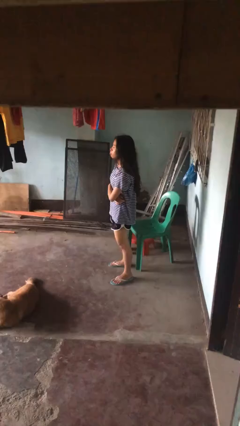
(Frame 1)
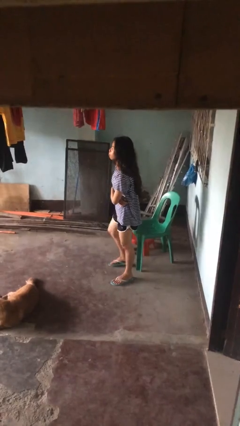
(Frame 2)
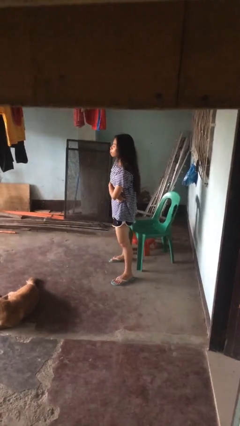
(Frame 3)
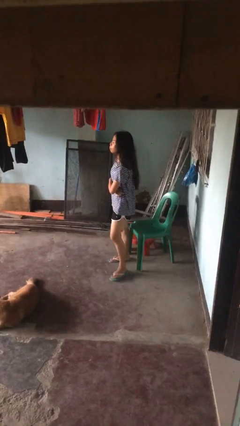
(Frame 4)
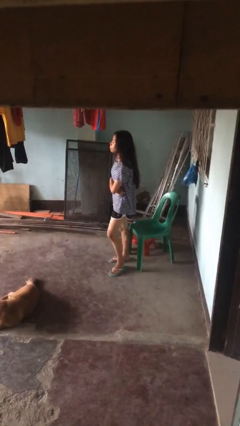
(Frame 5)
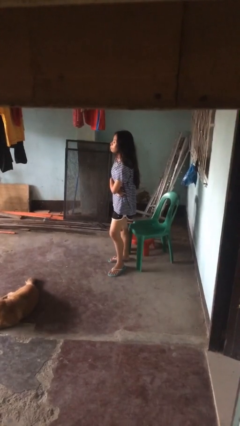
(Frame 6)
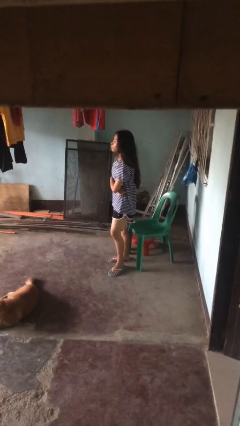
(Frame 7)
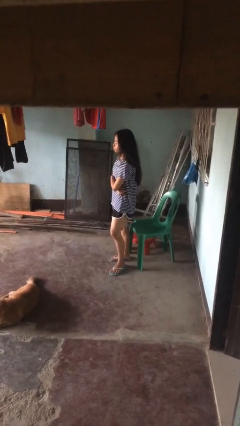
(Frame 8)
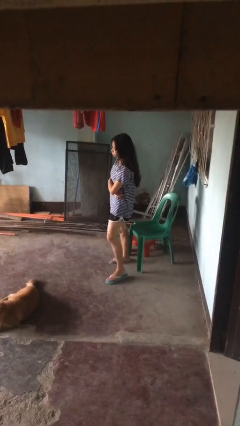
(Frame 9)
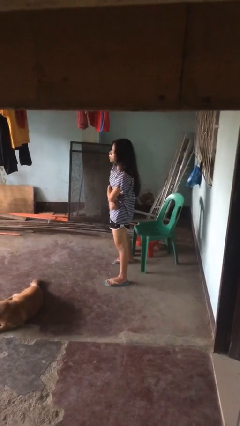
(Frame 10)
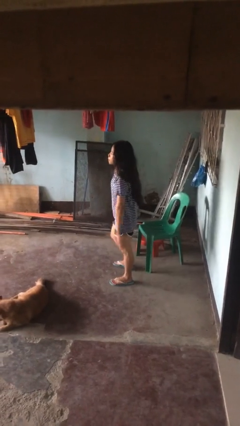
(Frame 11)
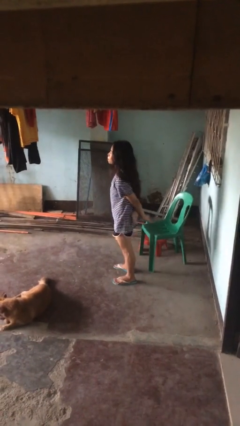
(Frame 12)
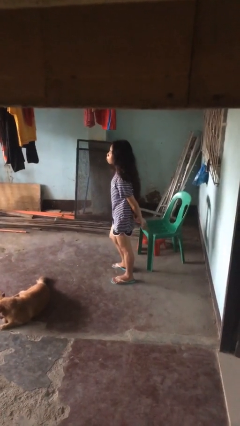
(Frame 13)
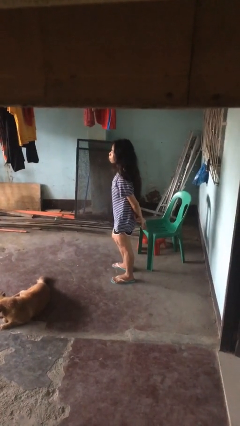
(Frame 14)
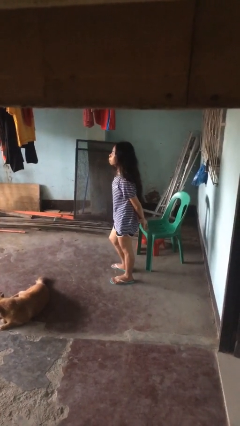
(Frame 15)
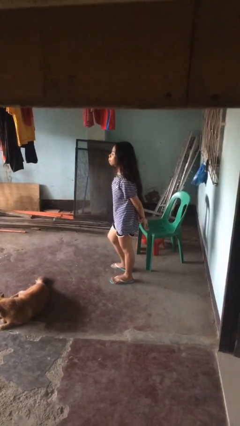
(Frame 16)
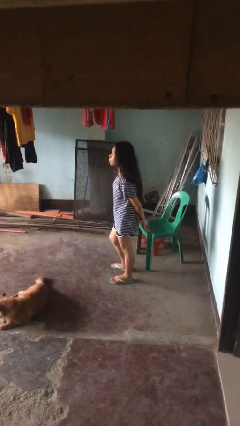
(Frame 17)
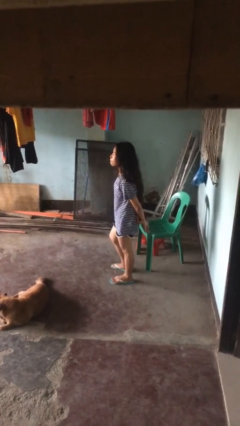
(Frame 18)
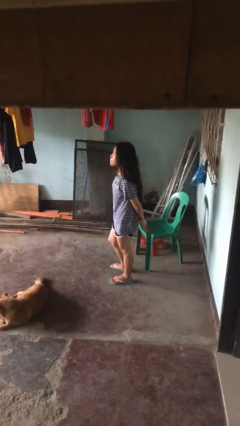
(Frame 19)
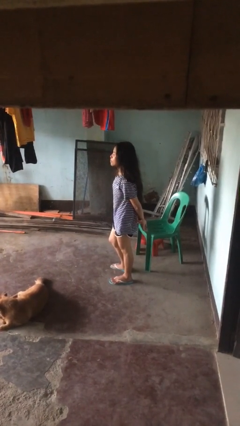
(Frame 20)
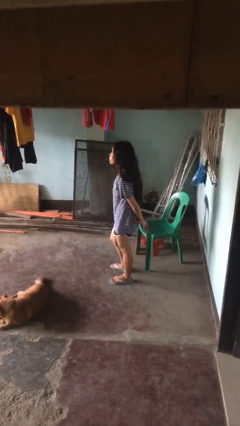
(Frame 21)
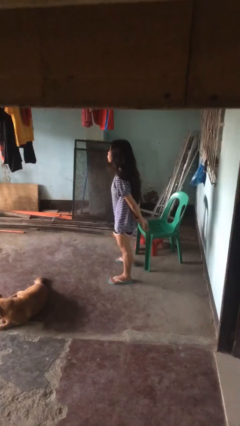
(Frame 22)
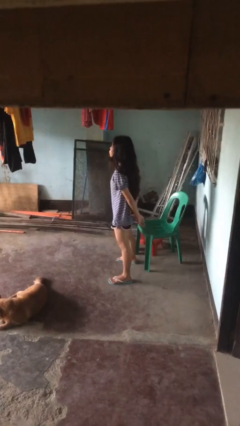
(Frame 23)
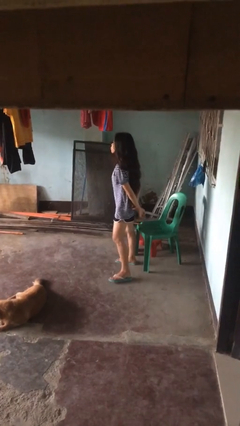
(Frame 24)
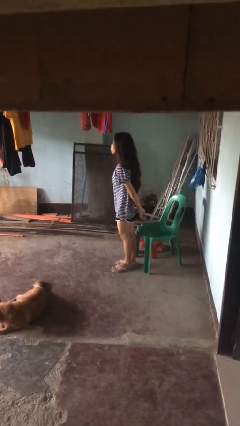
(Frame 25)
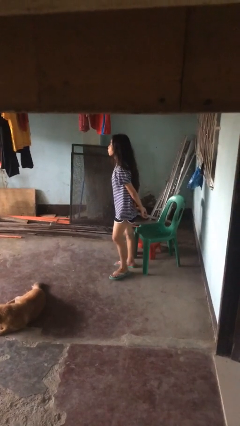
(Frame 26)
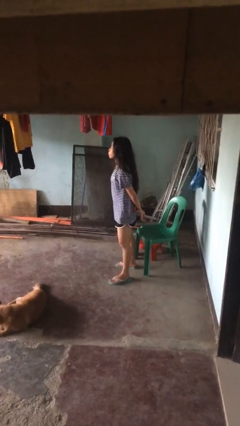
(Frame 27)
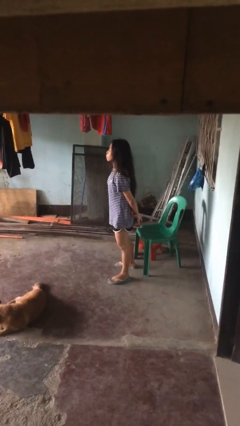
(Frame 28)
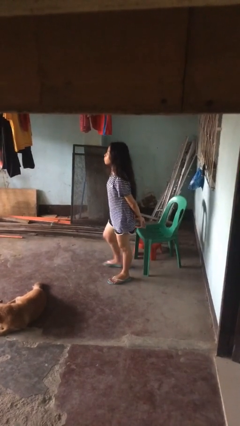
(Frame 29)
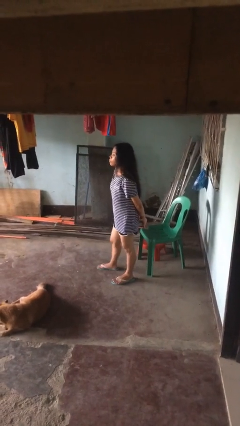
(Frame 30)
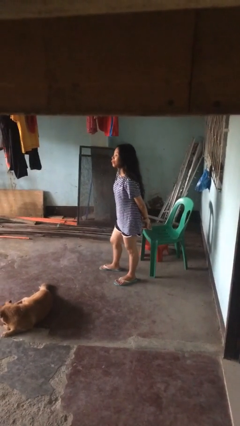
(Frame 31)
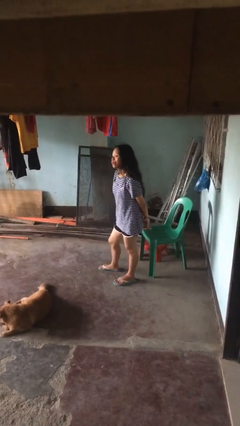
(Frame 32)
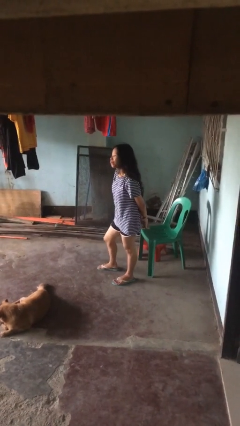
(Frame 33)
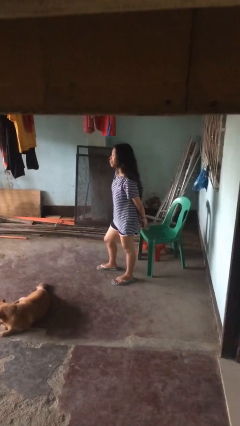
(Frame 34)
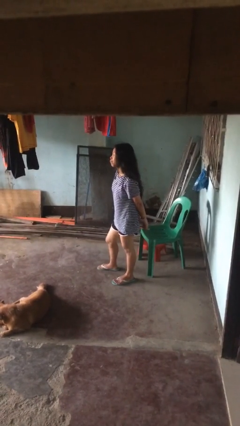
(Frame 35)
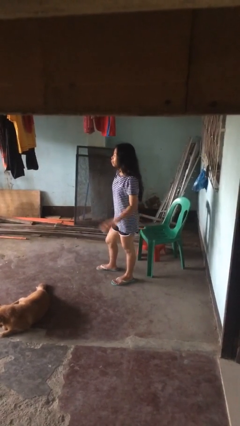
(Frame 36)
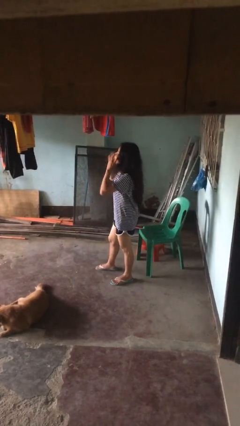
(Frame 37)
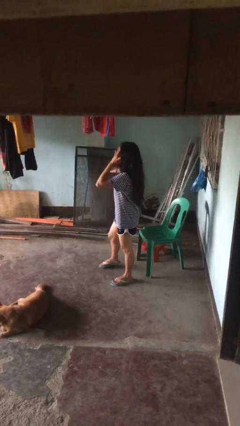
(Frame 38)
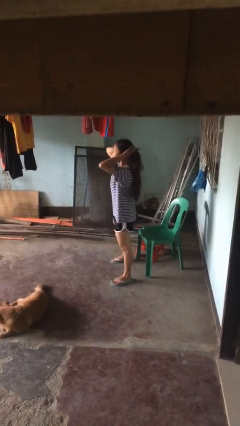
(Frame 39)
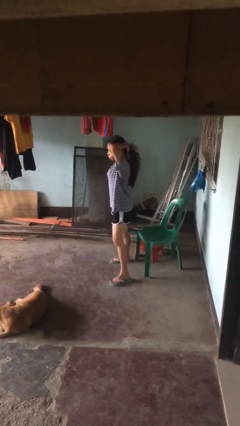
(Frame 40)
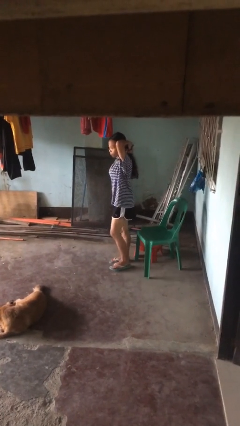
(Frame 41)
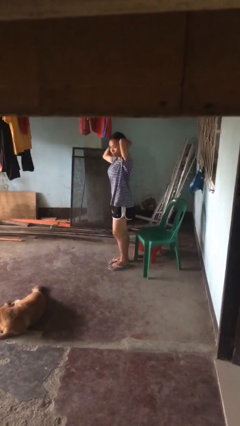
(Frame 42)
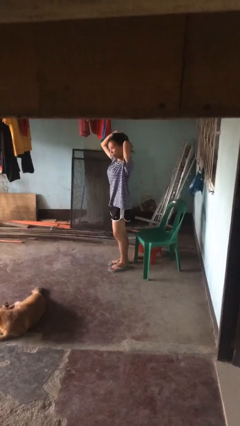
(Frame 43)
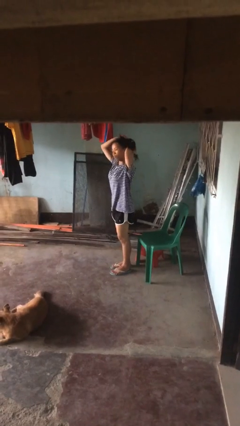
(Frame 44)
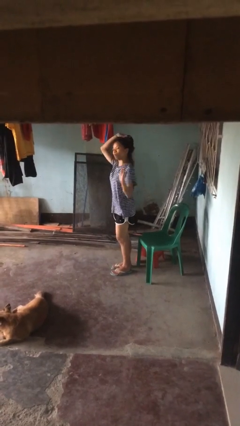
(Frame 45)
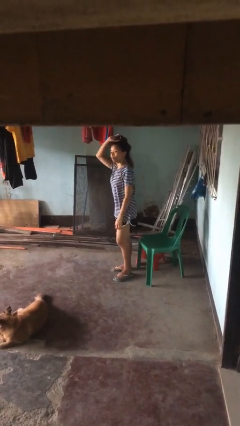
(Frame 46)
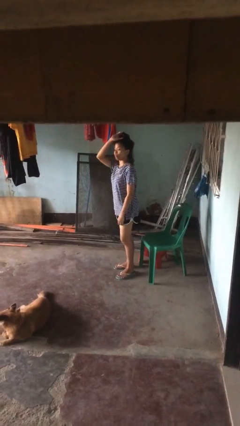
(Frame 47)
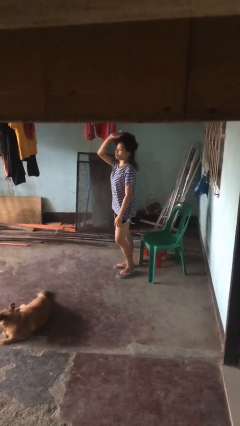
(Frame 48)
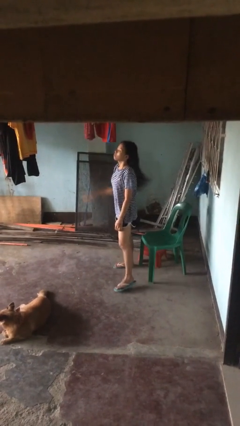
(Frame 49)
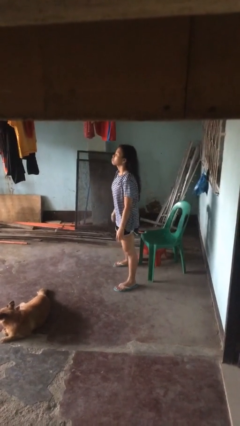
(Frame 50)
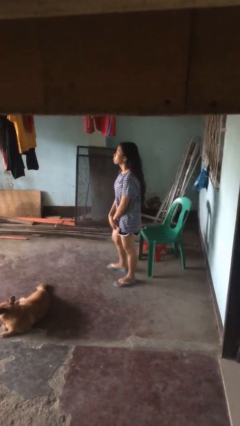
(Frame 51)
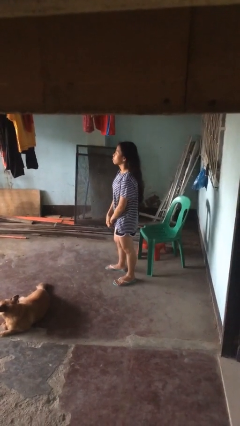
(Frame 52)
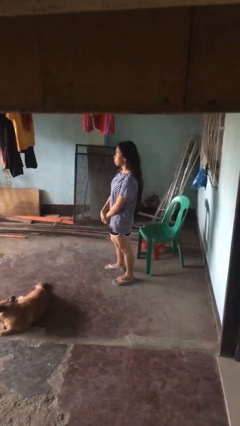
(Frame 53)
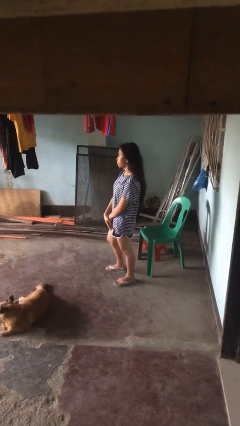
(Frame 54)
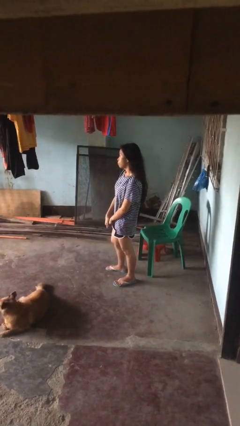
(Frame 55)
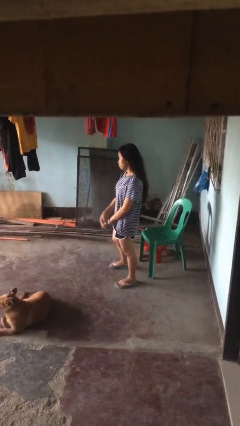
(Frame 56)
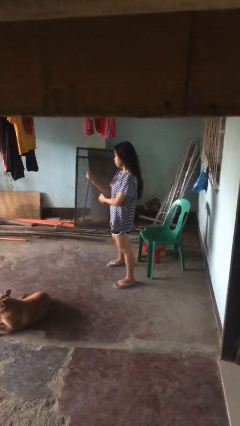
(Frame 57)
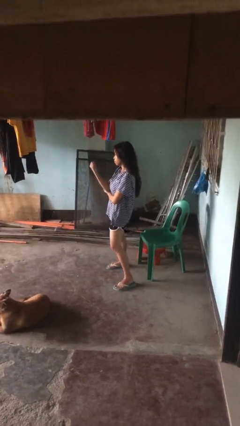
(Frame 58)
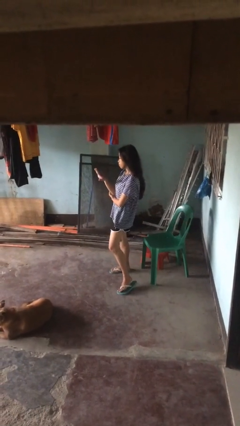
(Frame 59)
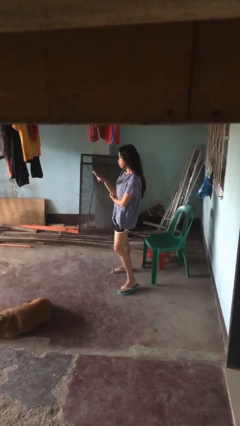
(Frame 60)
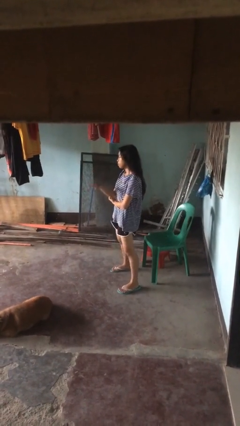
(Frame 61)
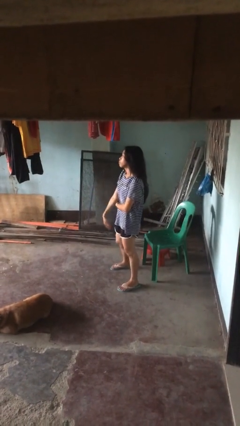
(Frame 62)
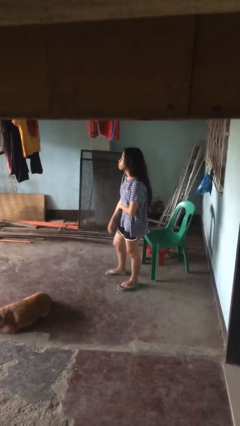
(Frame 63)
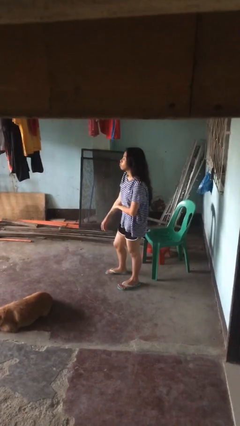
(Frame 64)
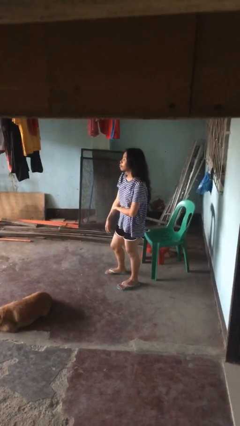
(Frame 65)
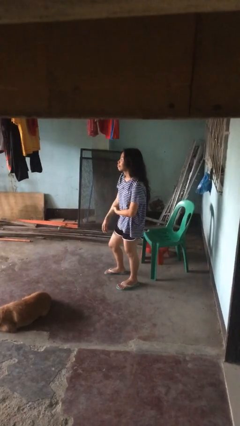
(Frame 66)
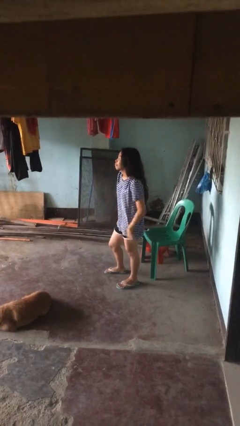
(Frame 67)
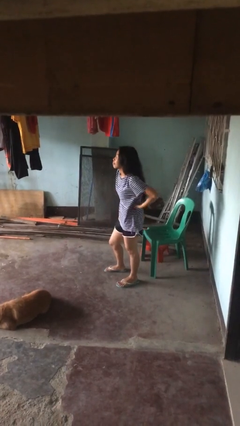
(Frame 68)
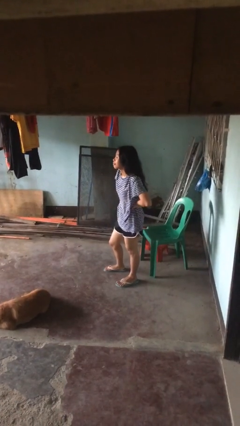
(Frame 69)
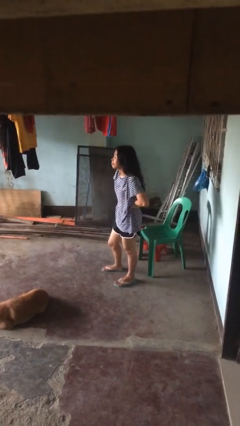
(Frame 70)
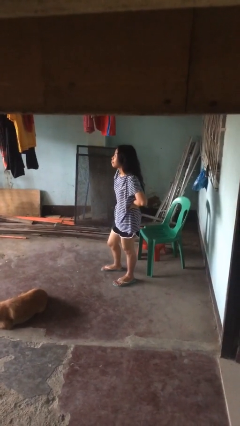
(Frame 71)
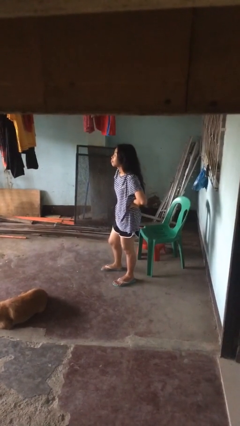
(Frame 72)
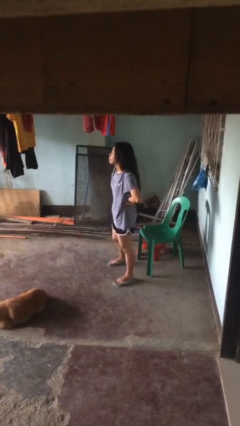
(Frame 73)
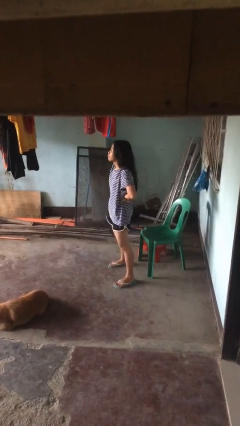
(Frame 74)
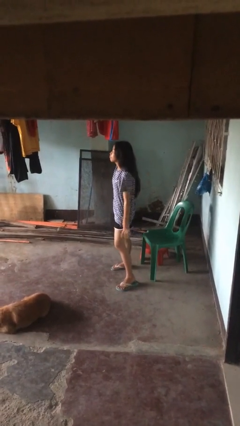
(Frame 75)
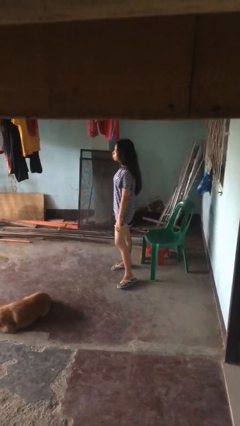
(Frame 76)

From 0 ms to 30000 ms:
person walks

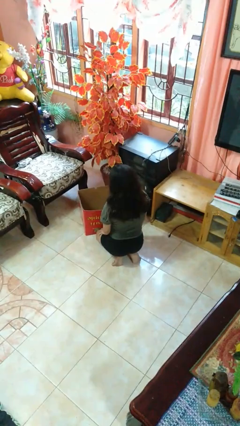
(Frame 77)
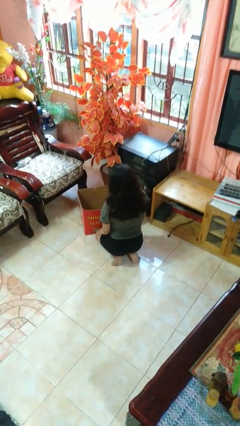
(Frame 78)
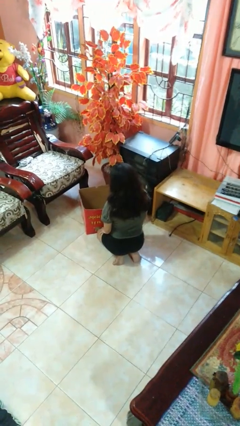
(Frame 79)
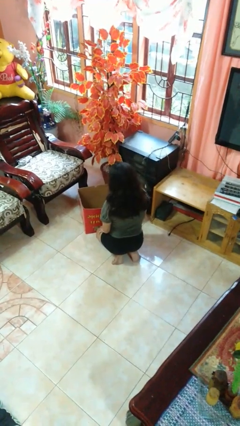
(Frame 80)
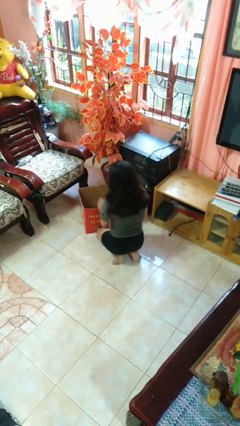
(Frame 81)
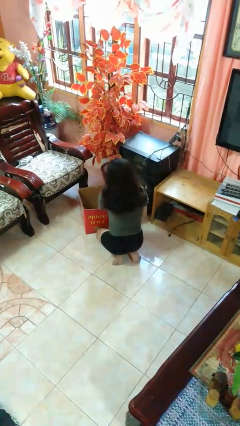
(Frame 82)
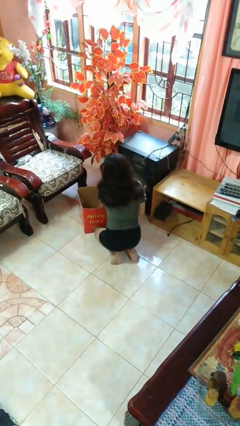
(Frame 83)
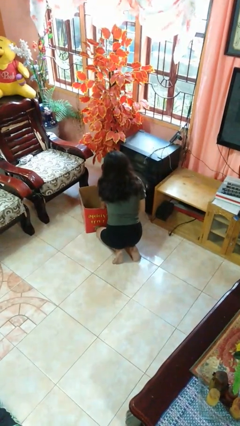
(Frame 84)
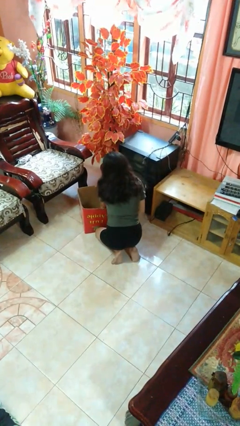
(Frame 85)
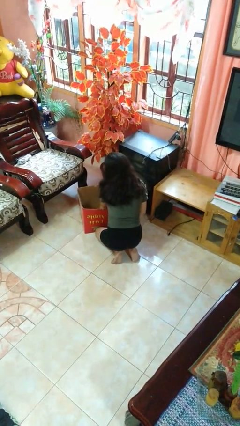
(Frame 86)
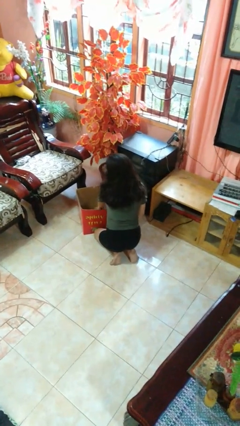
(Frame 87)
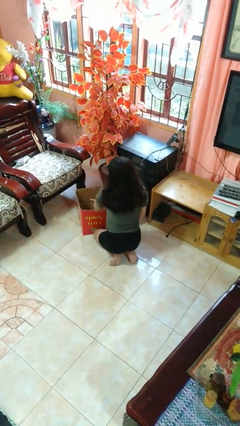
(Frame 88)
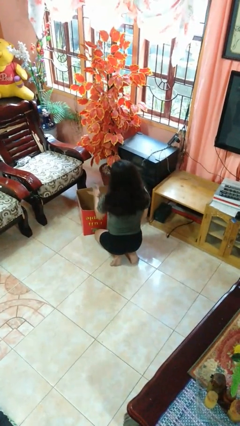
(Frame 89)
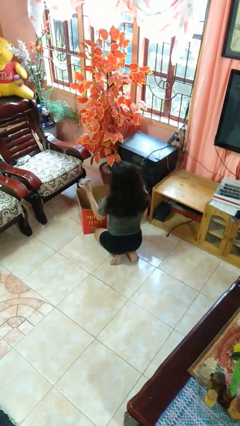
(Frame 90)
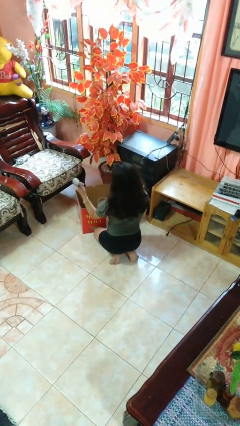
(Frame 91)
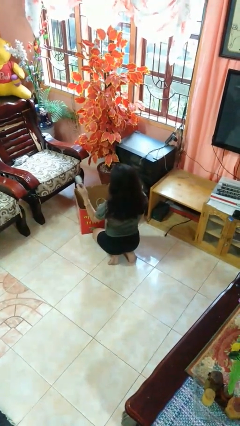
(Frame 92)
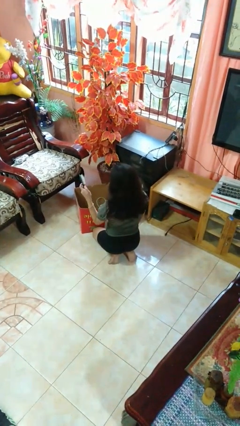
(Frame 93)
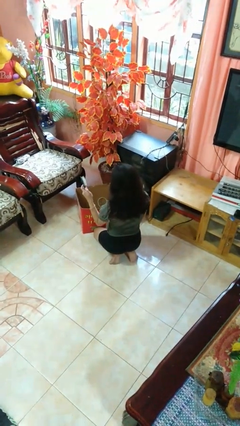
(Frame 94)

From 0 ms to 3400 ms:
person takes object from box
